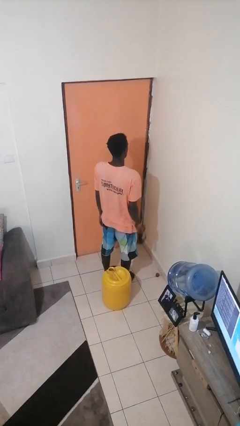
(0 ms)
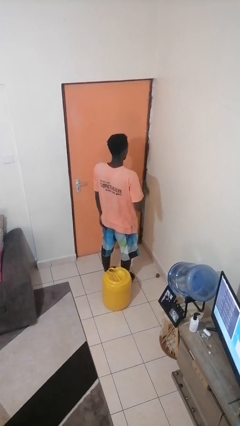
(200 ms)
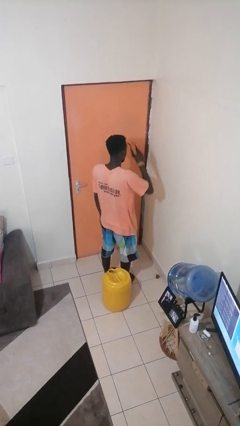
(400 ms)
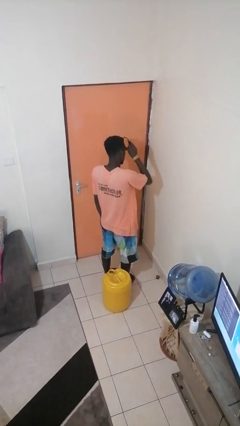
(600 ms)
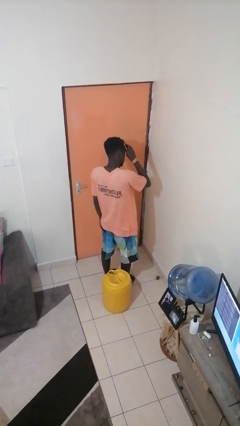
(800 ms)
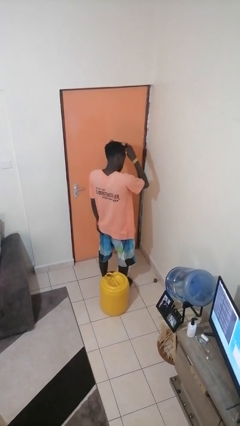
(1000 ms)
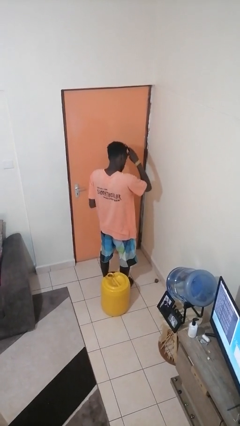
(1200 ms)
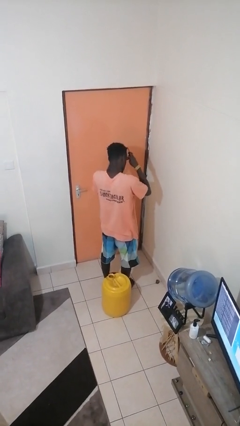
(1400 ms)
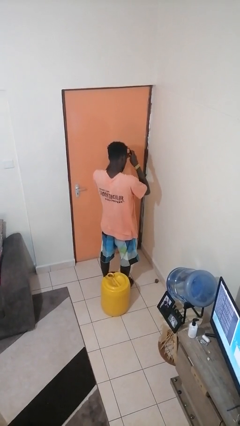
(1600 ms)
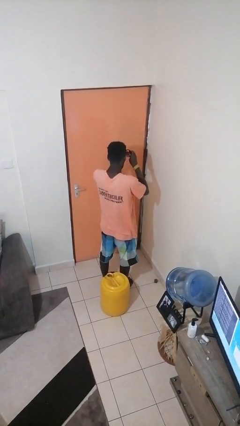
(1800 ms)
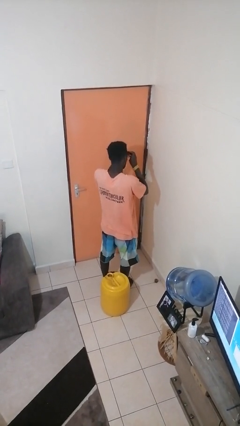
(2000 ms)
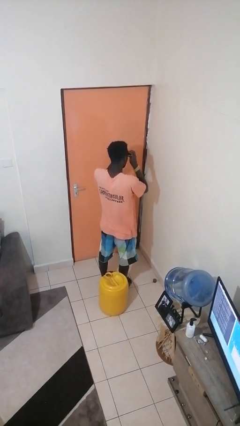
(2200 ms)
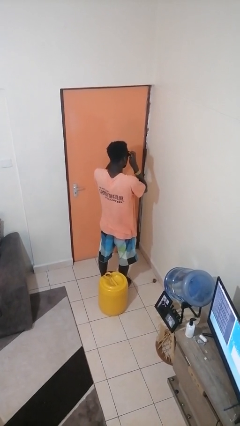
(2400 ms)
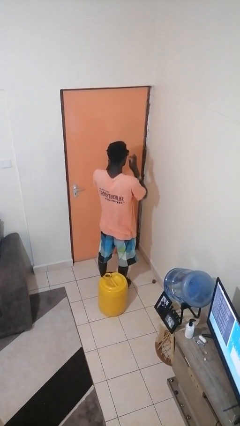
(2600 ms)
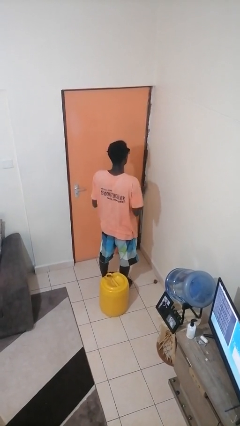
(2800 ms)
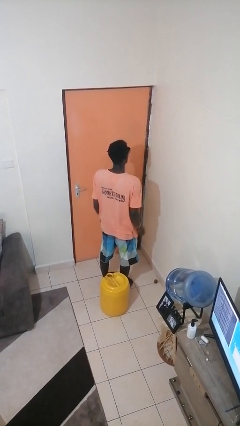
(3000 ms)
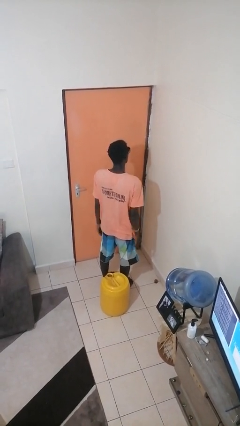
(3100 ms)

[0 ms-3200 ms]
person puts on sunglasses

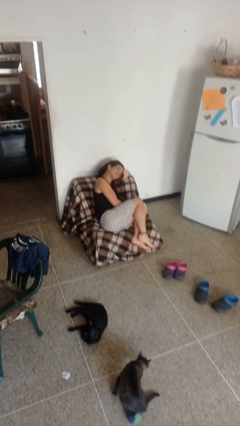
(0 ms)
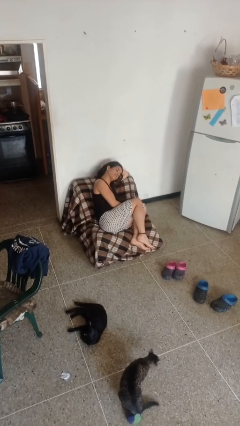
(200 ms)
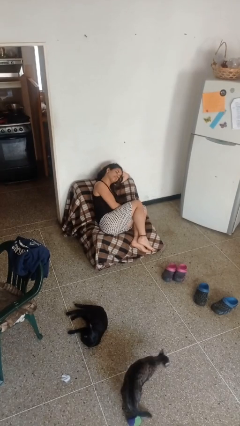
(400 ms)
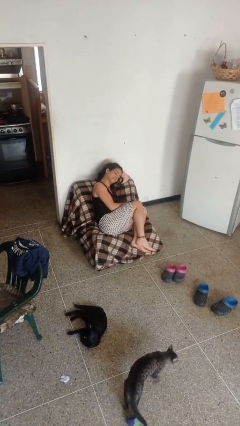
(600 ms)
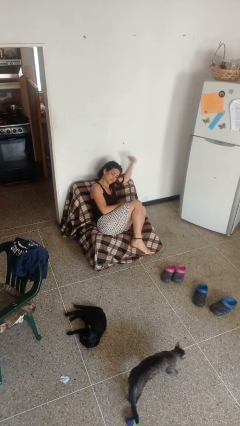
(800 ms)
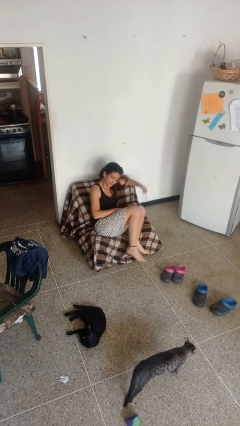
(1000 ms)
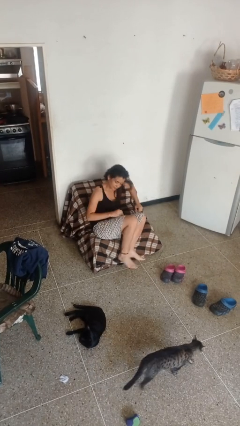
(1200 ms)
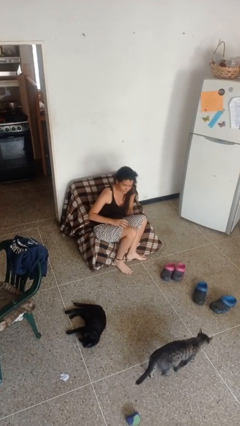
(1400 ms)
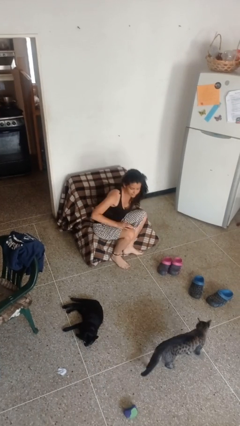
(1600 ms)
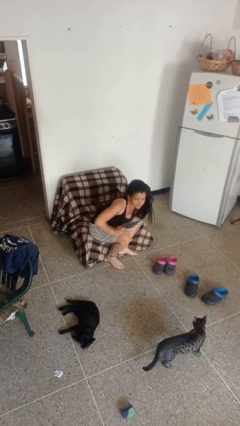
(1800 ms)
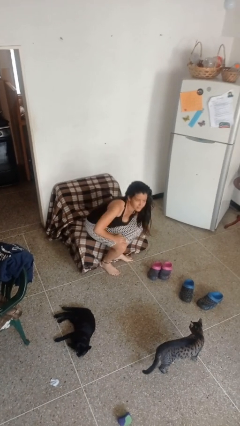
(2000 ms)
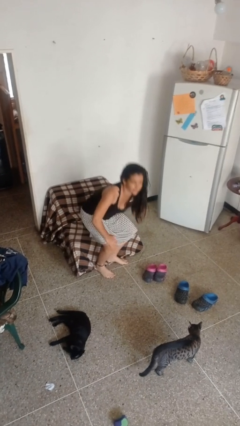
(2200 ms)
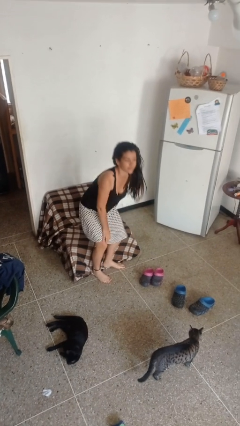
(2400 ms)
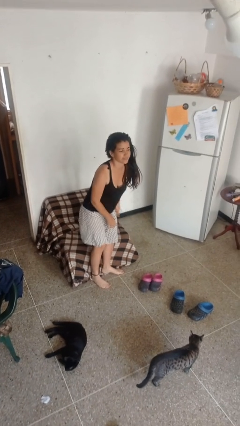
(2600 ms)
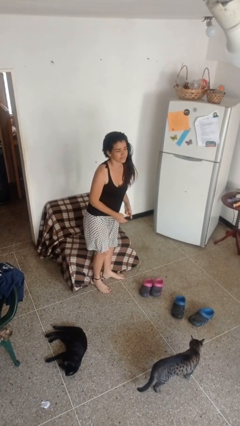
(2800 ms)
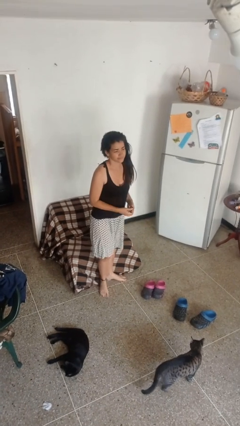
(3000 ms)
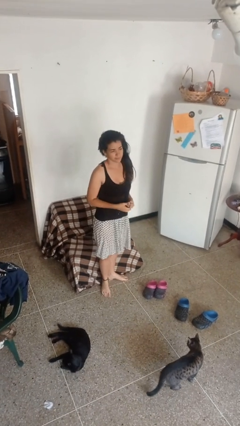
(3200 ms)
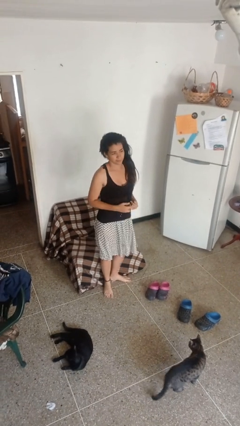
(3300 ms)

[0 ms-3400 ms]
person stands up

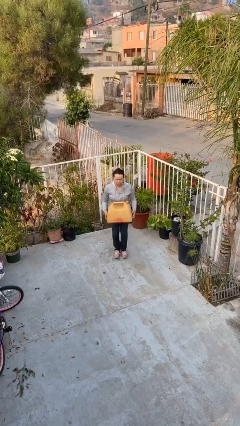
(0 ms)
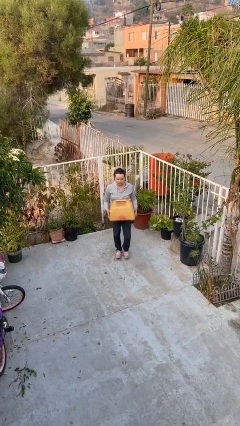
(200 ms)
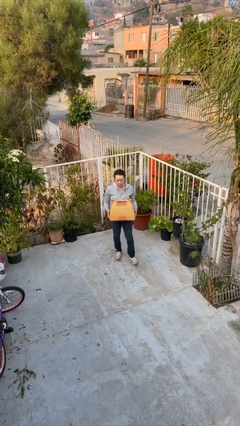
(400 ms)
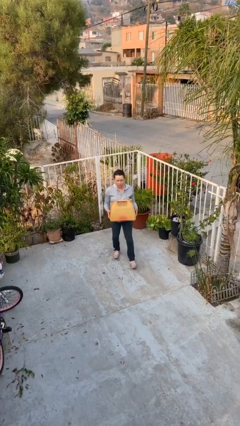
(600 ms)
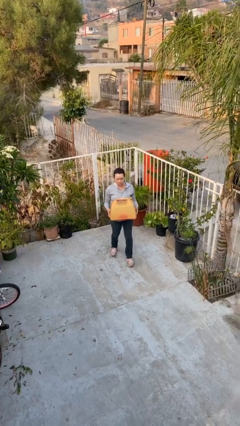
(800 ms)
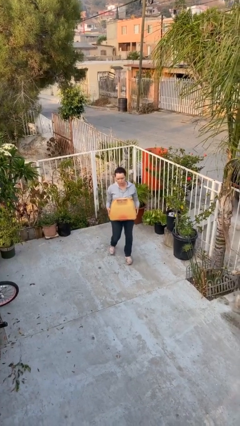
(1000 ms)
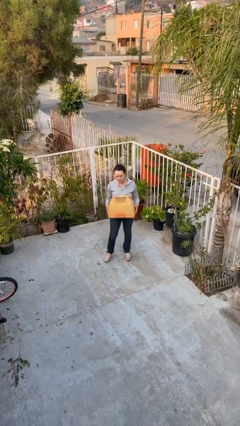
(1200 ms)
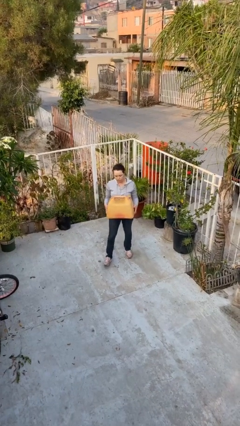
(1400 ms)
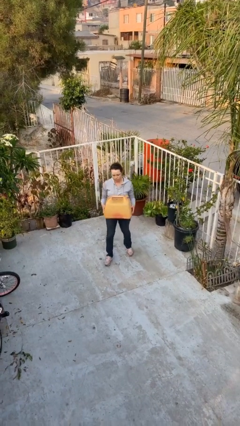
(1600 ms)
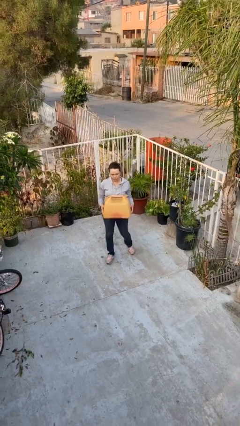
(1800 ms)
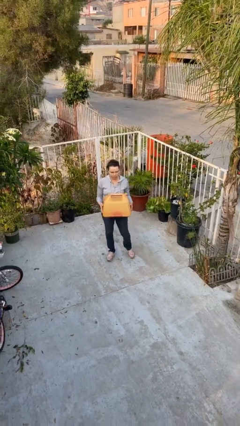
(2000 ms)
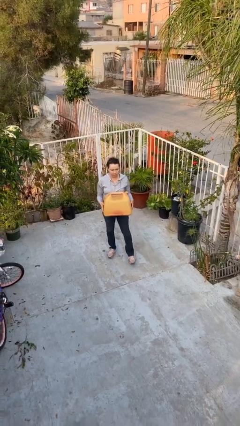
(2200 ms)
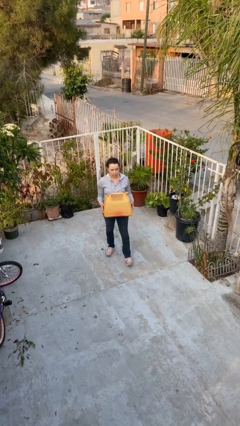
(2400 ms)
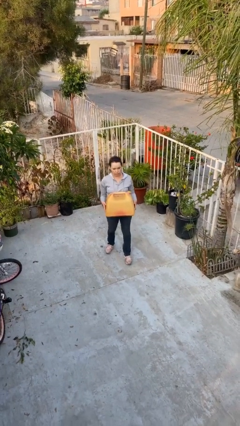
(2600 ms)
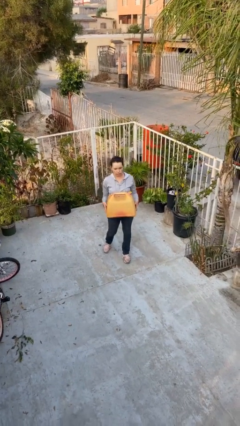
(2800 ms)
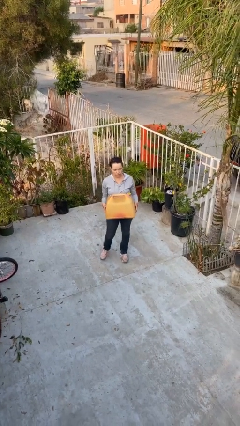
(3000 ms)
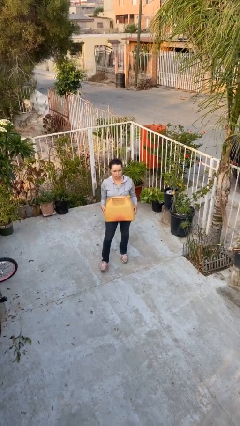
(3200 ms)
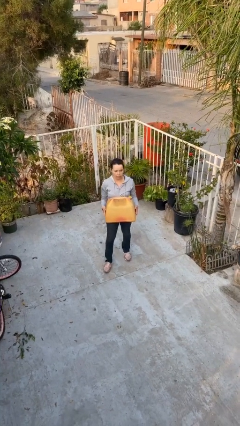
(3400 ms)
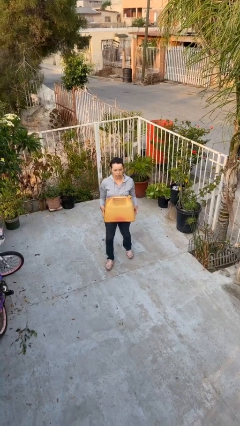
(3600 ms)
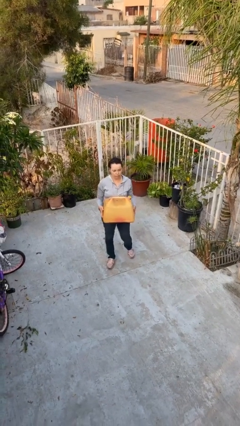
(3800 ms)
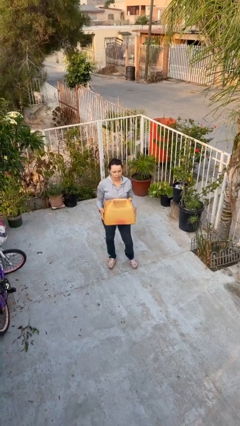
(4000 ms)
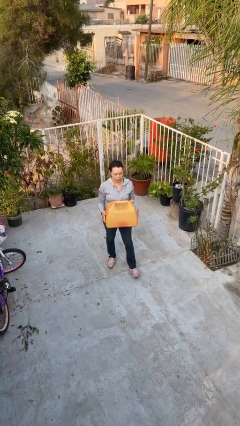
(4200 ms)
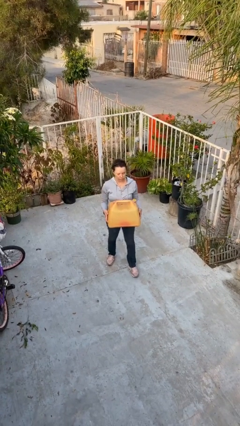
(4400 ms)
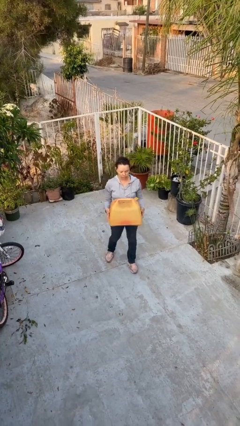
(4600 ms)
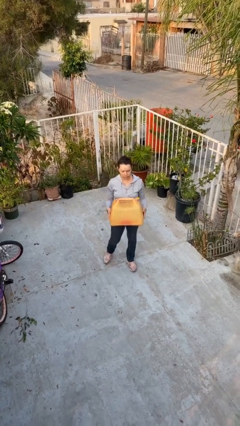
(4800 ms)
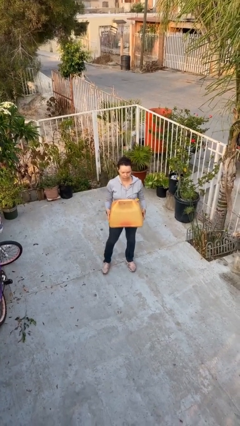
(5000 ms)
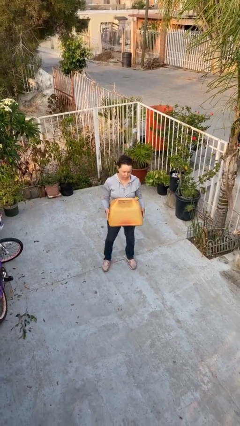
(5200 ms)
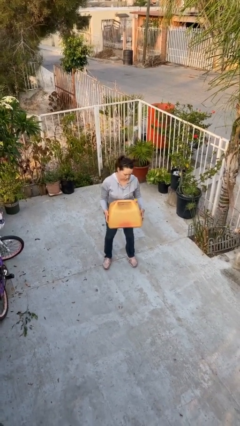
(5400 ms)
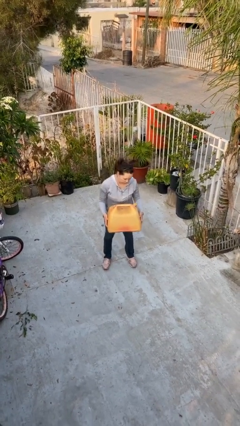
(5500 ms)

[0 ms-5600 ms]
person carries heavy object

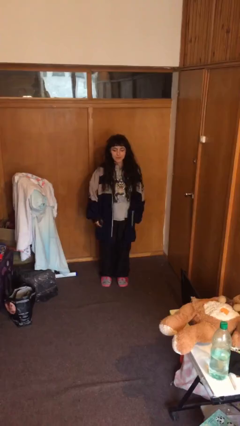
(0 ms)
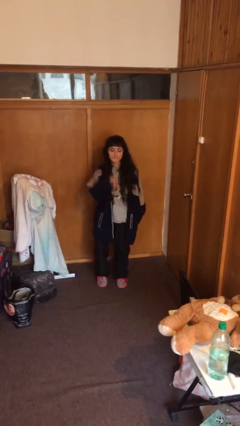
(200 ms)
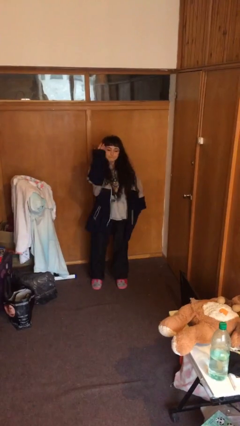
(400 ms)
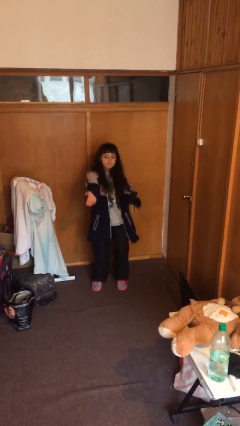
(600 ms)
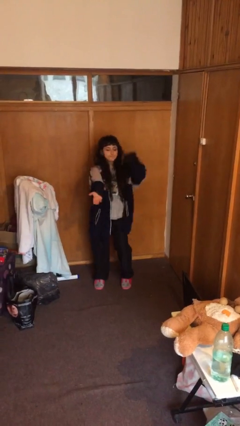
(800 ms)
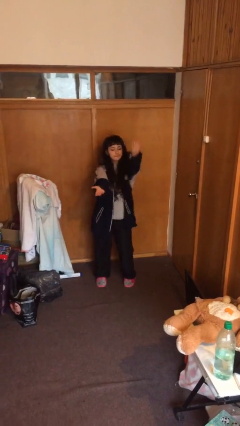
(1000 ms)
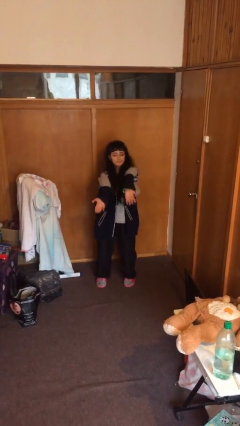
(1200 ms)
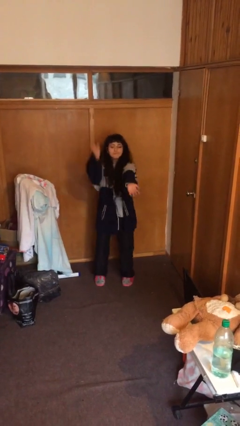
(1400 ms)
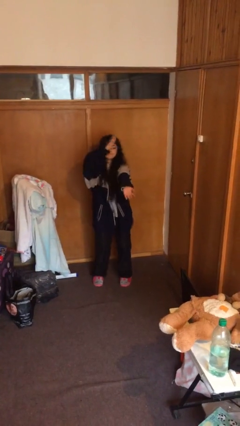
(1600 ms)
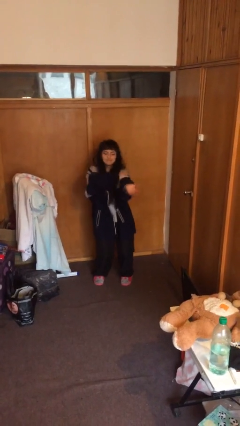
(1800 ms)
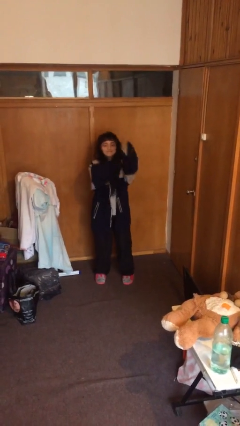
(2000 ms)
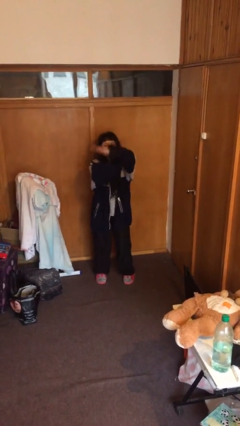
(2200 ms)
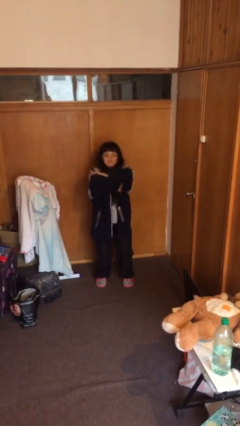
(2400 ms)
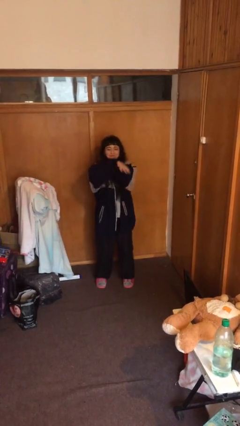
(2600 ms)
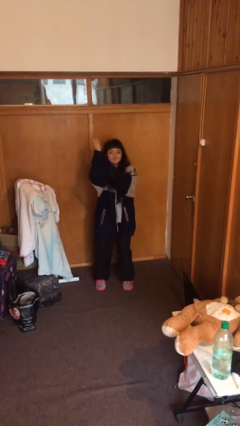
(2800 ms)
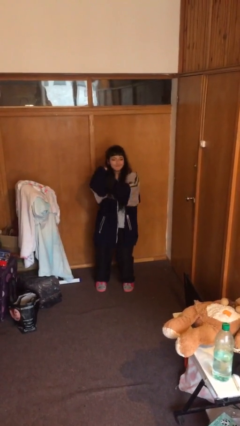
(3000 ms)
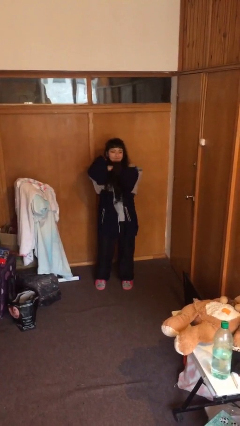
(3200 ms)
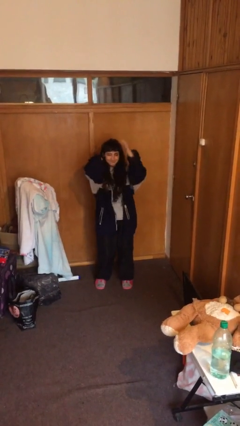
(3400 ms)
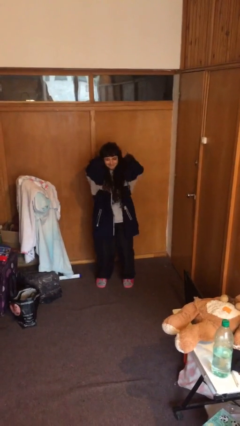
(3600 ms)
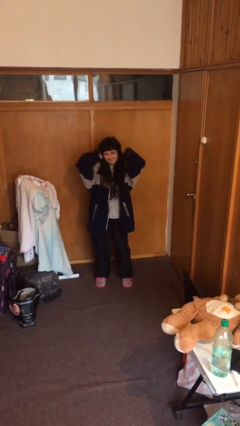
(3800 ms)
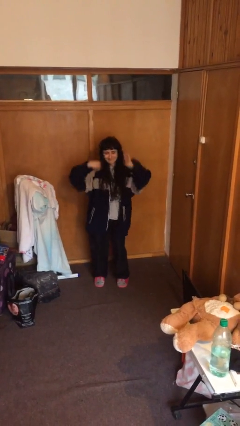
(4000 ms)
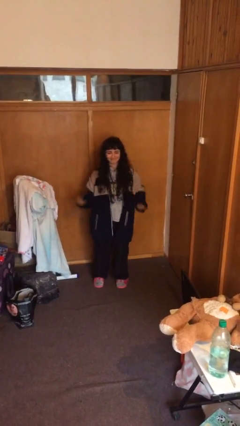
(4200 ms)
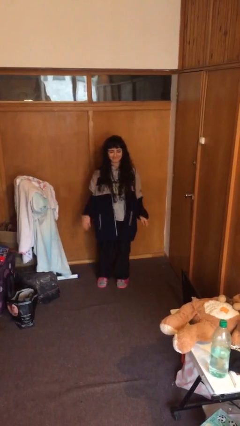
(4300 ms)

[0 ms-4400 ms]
person dances in place

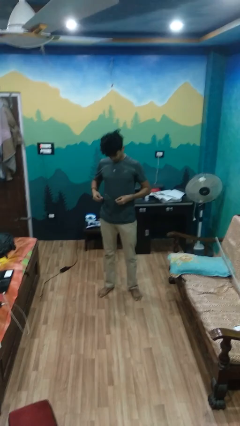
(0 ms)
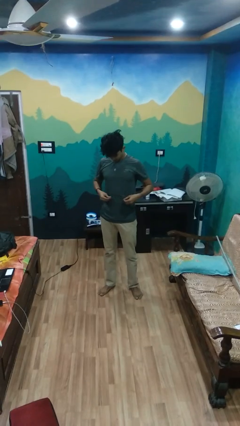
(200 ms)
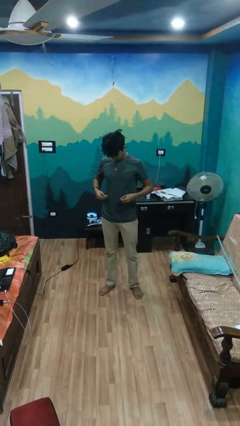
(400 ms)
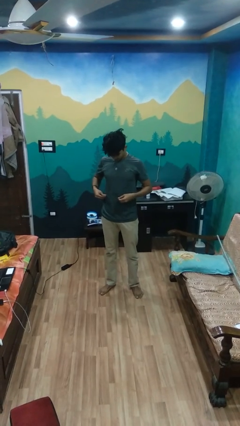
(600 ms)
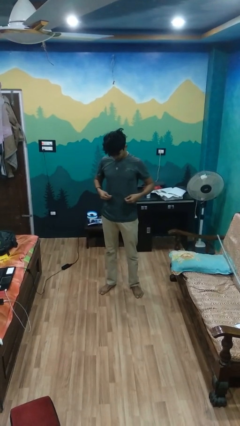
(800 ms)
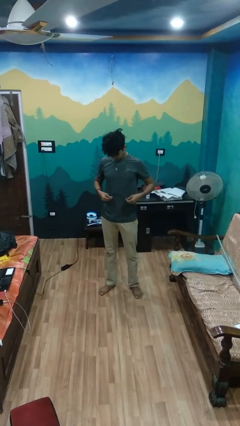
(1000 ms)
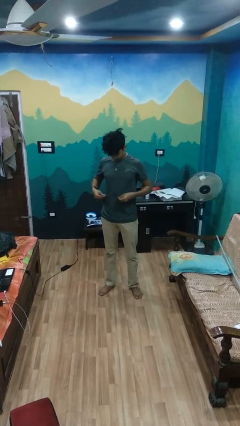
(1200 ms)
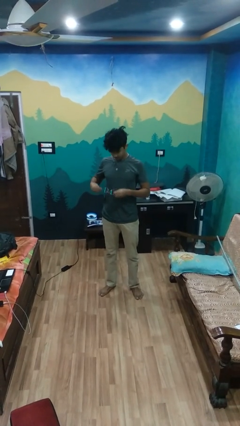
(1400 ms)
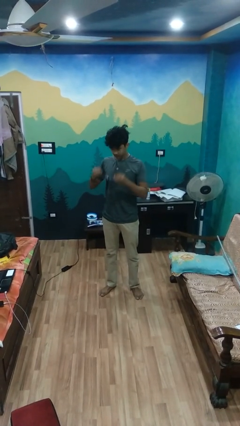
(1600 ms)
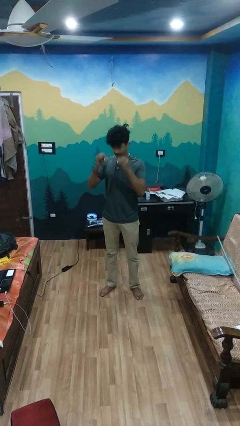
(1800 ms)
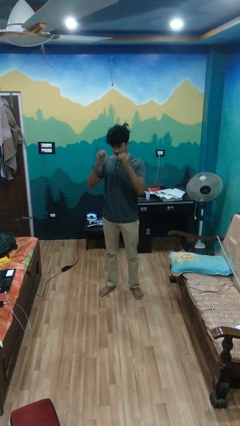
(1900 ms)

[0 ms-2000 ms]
person cleans eyeglasses
